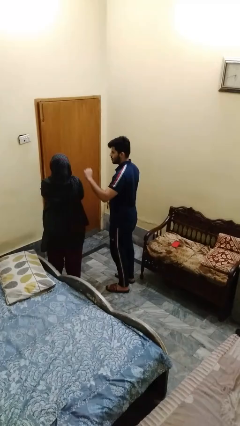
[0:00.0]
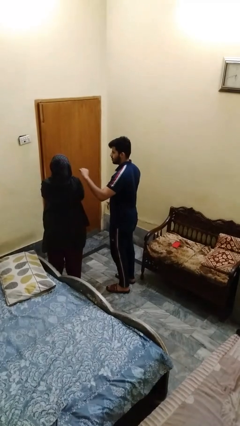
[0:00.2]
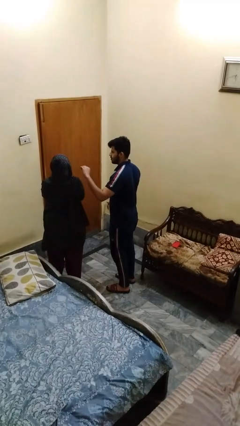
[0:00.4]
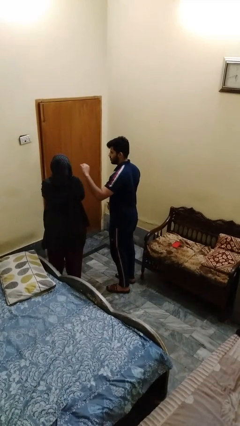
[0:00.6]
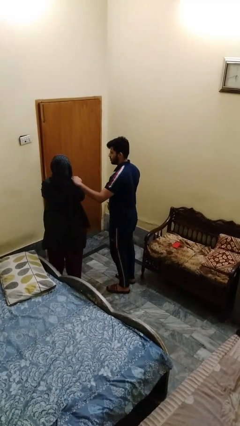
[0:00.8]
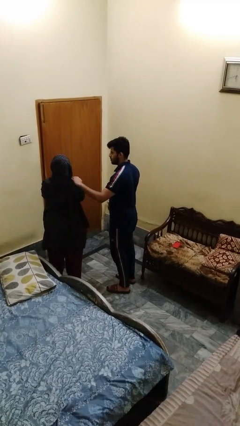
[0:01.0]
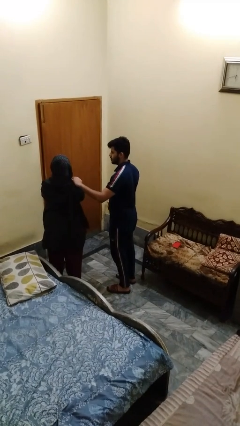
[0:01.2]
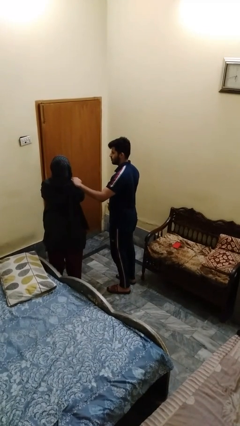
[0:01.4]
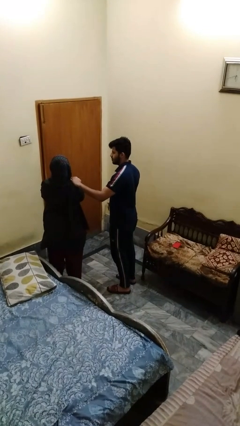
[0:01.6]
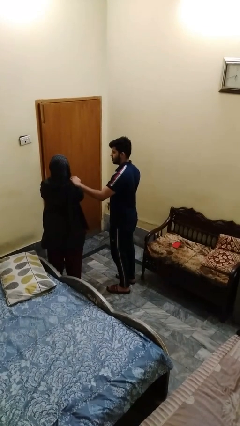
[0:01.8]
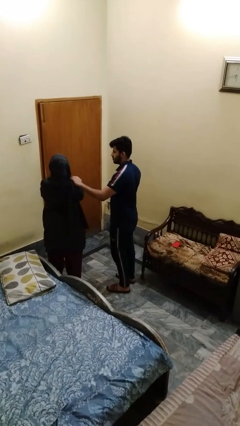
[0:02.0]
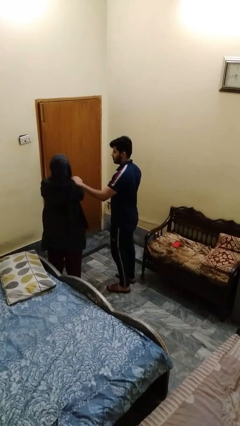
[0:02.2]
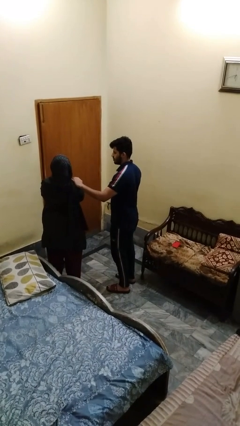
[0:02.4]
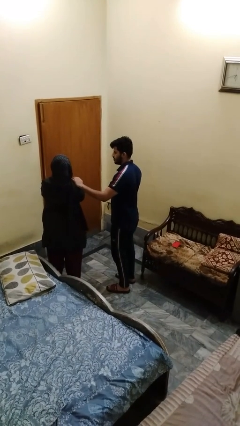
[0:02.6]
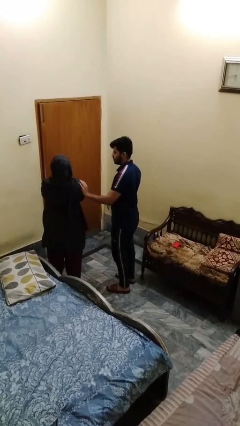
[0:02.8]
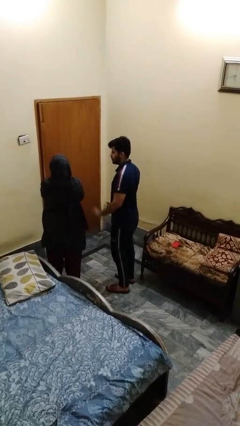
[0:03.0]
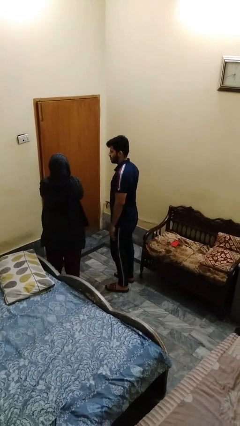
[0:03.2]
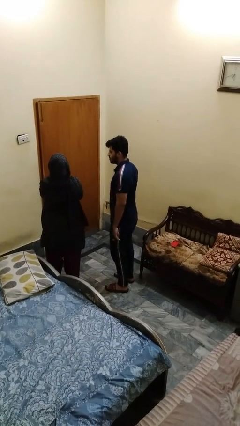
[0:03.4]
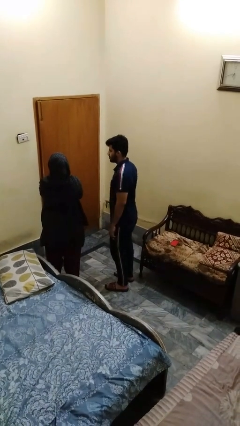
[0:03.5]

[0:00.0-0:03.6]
person pounds shoulders of person

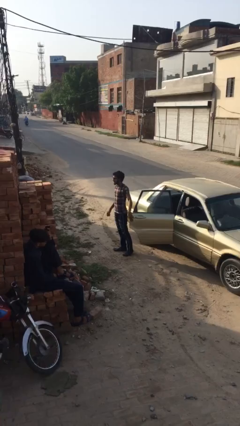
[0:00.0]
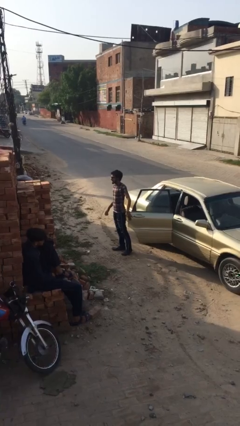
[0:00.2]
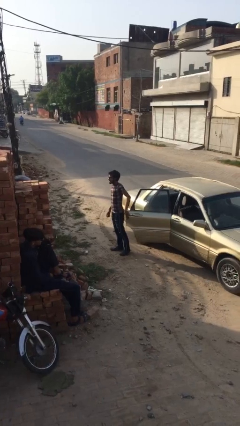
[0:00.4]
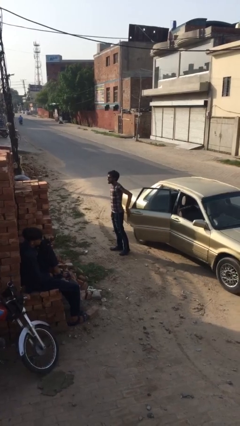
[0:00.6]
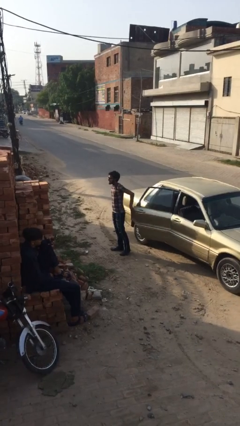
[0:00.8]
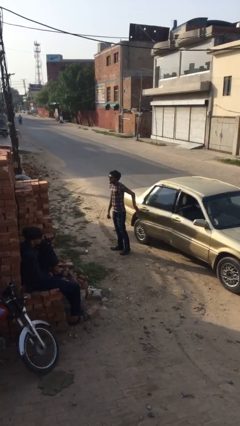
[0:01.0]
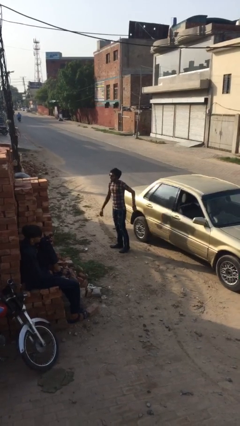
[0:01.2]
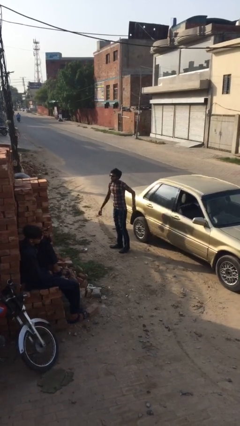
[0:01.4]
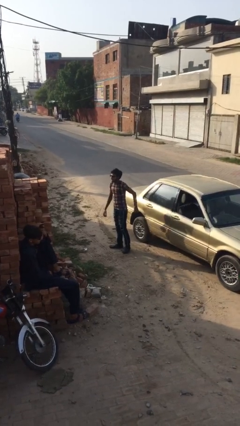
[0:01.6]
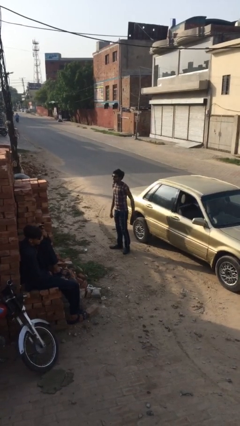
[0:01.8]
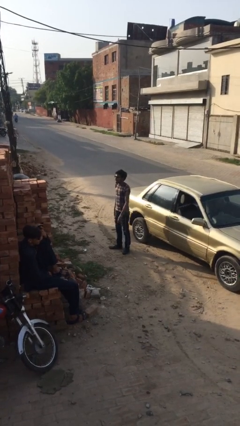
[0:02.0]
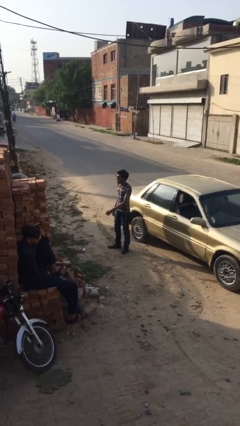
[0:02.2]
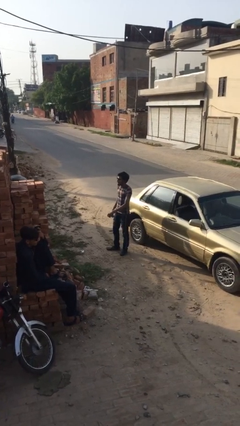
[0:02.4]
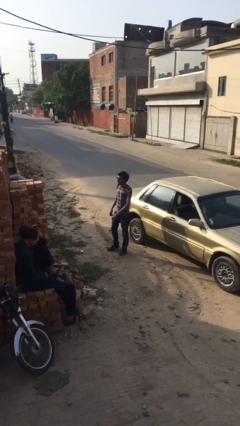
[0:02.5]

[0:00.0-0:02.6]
person closes car door

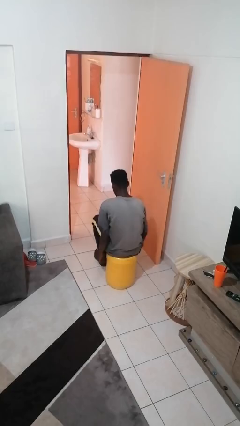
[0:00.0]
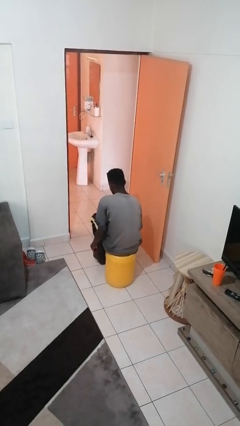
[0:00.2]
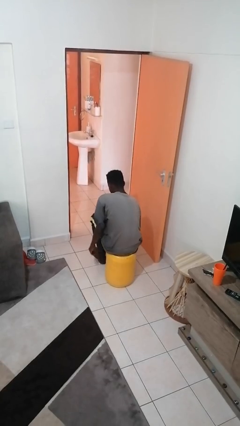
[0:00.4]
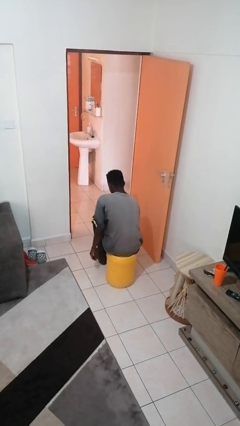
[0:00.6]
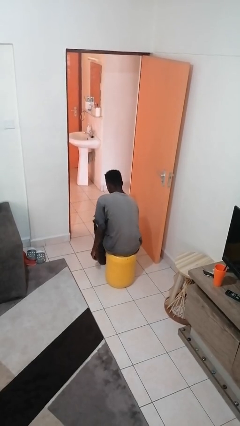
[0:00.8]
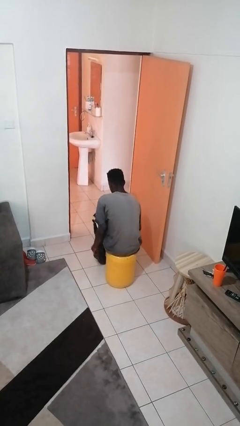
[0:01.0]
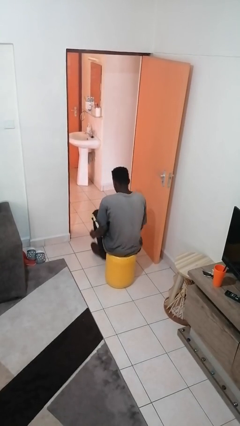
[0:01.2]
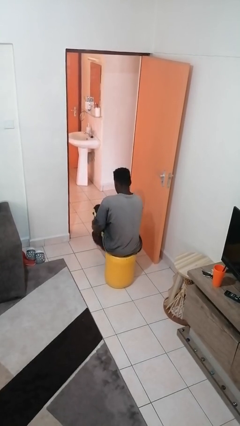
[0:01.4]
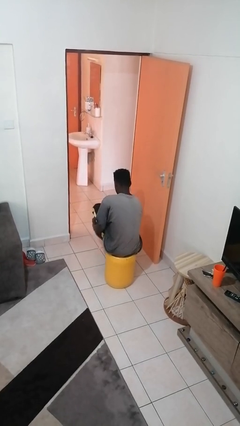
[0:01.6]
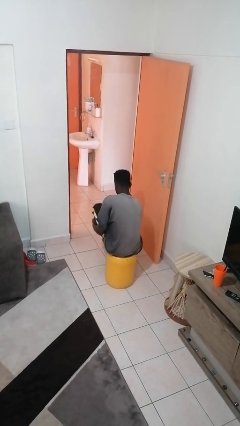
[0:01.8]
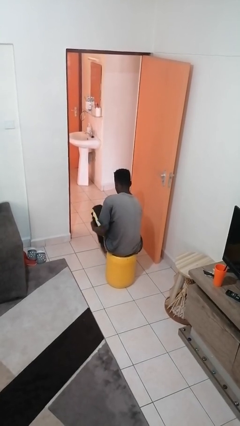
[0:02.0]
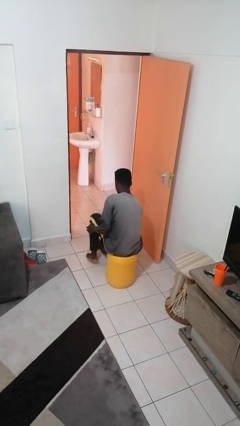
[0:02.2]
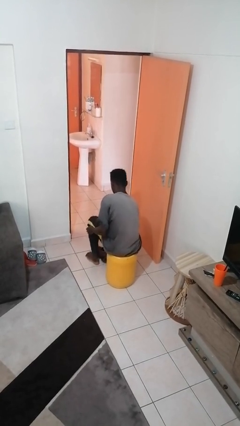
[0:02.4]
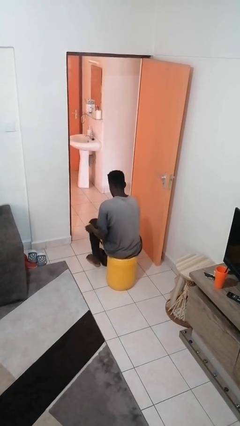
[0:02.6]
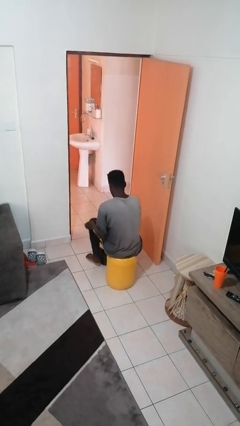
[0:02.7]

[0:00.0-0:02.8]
person takes off shoes

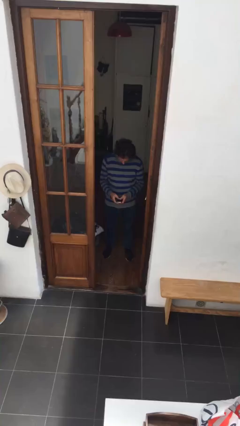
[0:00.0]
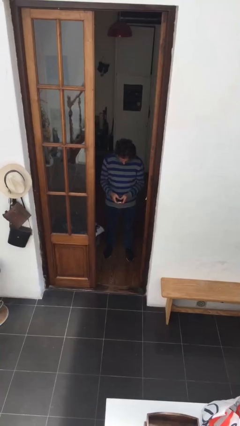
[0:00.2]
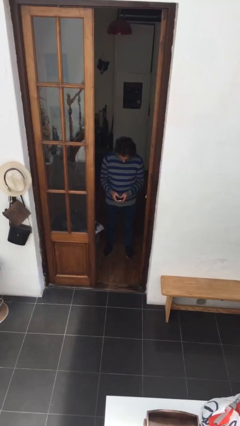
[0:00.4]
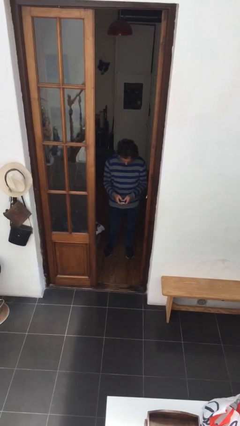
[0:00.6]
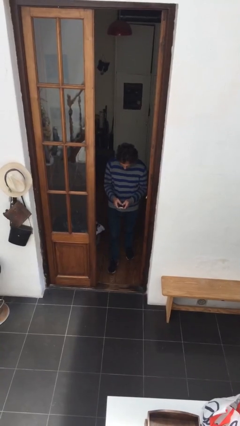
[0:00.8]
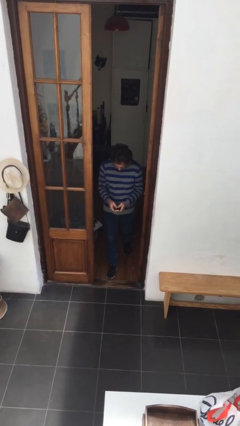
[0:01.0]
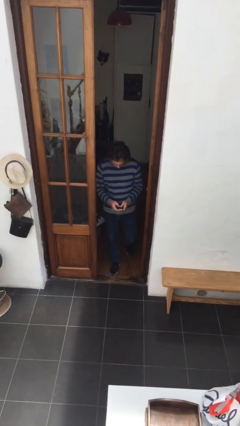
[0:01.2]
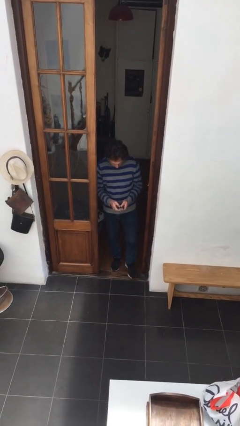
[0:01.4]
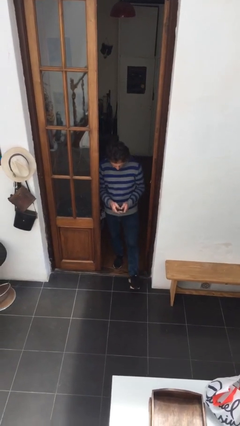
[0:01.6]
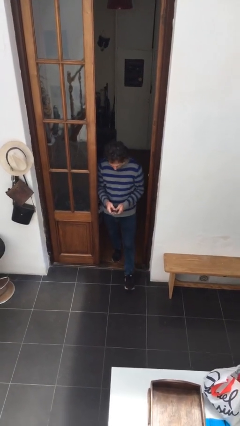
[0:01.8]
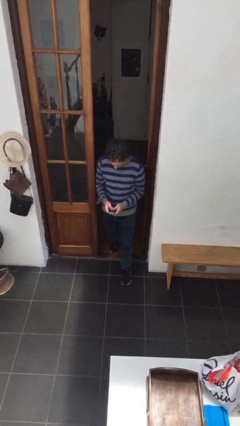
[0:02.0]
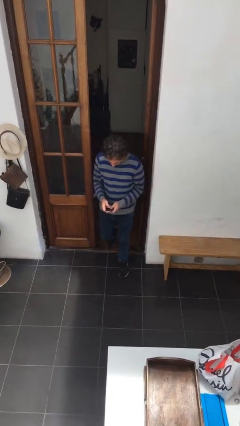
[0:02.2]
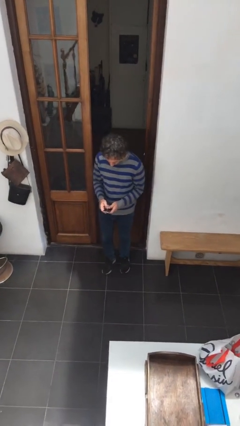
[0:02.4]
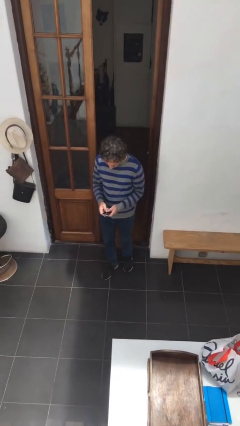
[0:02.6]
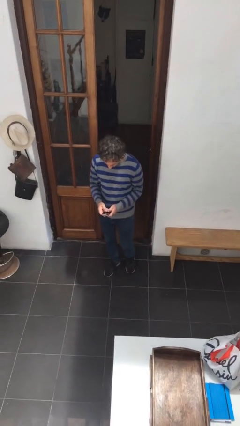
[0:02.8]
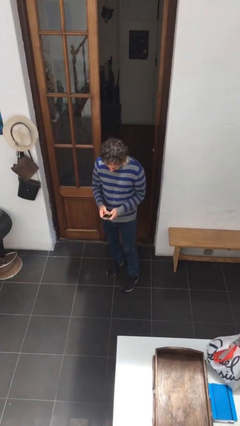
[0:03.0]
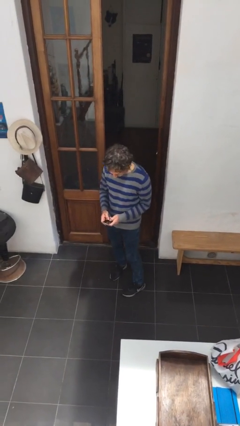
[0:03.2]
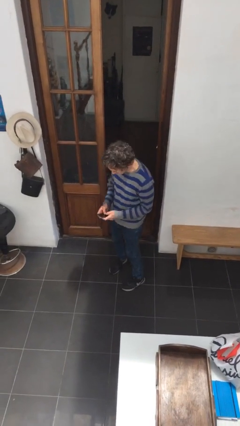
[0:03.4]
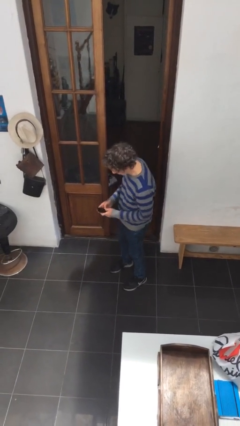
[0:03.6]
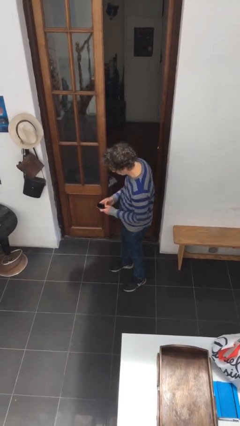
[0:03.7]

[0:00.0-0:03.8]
person enters scene through structure

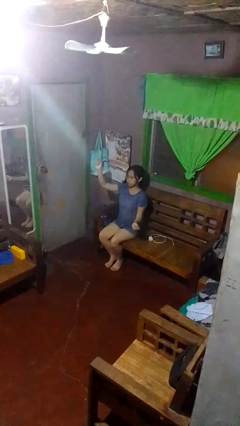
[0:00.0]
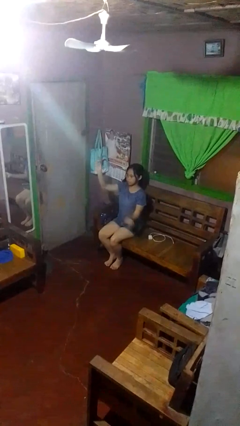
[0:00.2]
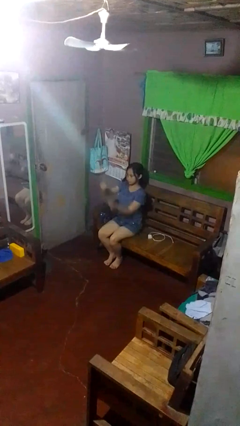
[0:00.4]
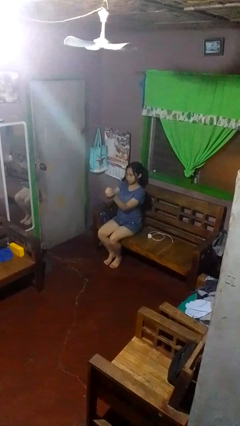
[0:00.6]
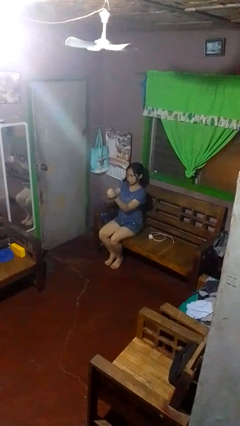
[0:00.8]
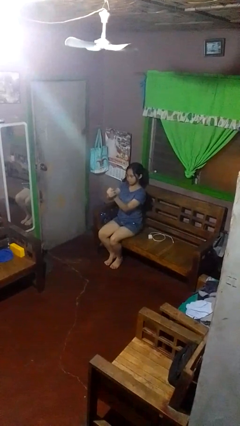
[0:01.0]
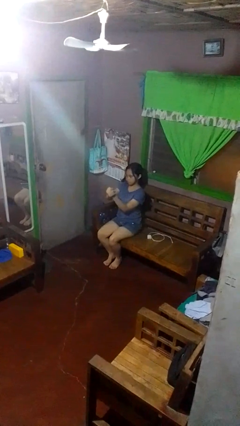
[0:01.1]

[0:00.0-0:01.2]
person gestures zoom out

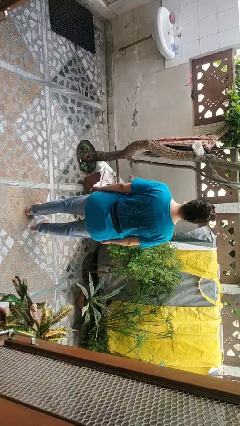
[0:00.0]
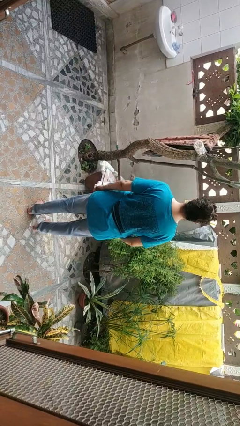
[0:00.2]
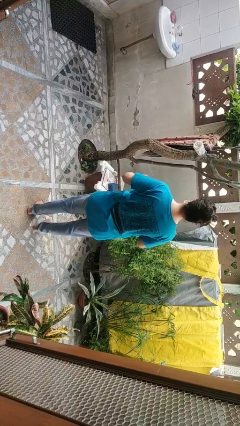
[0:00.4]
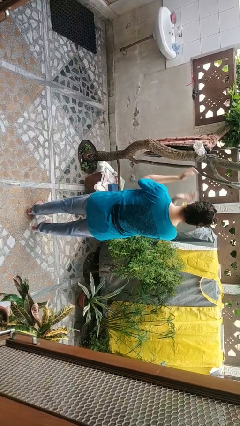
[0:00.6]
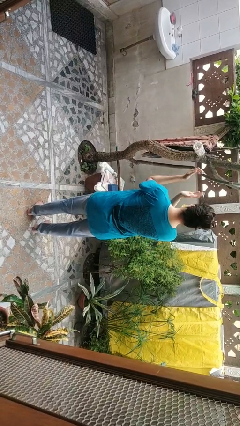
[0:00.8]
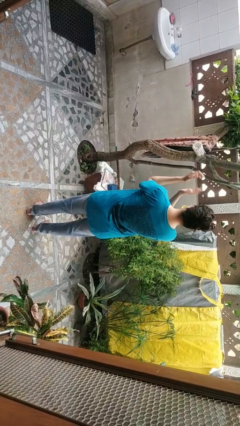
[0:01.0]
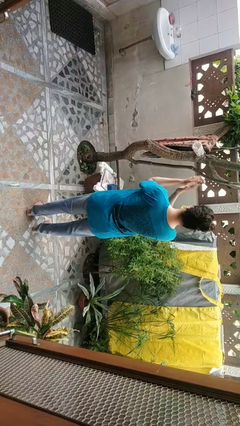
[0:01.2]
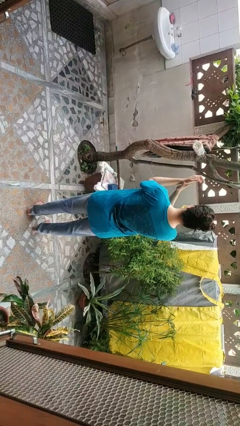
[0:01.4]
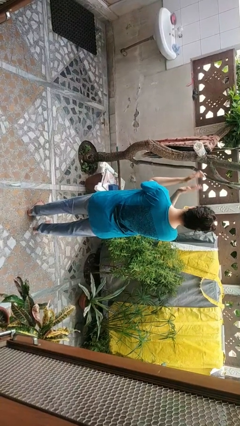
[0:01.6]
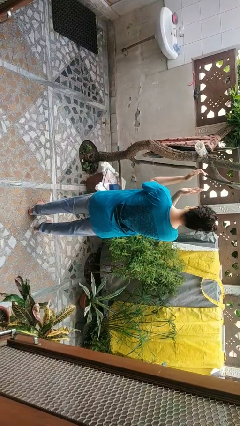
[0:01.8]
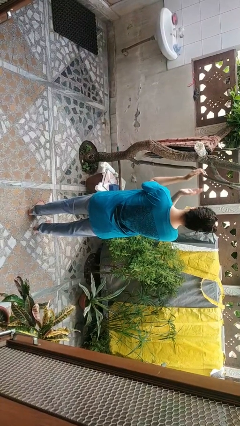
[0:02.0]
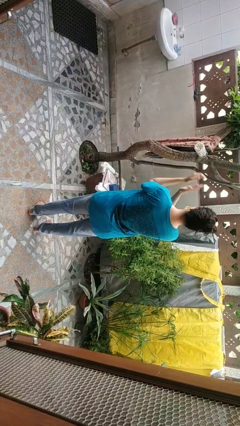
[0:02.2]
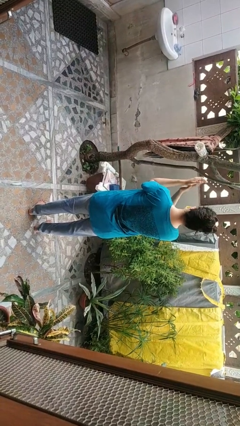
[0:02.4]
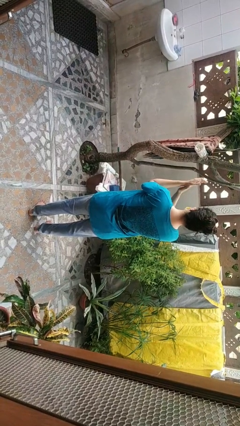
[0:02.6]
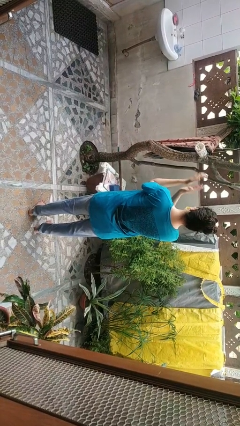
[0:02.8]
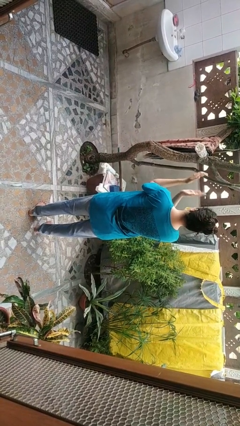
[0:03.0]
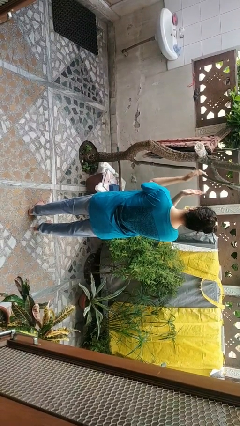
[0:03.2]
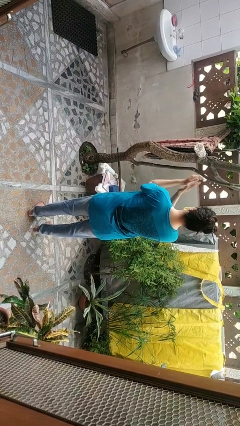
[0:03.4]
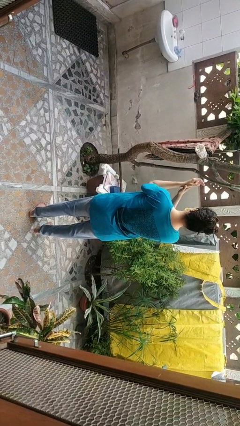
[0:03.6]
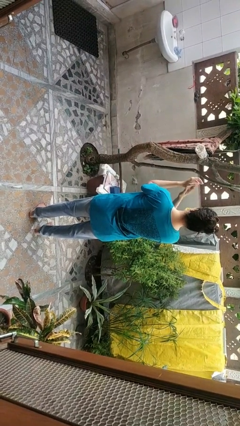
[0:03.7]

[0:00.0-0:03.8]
person claps hands
